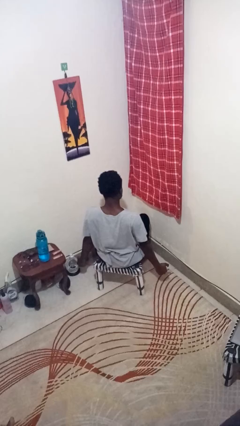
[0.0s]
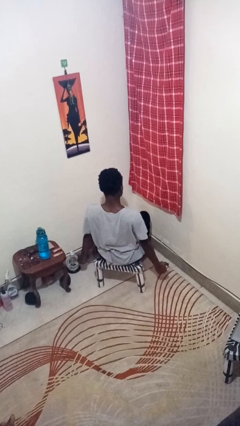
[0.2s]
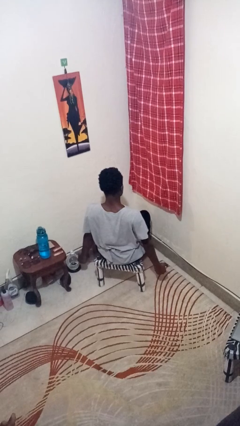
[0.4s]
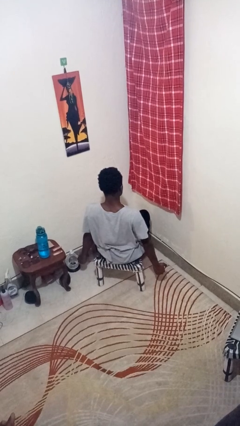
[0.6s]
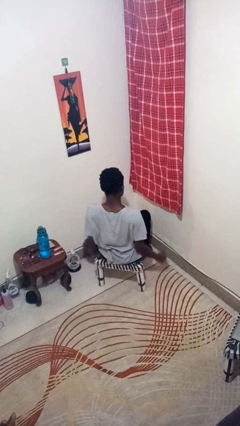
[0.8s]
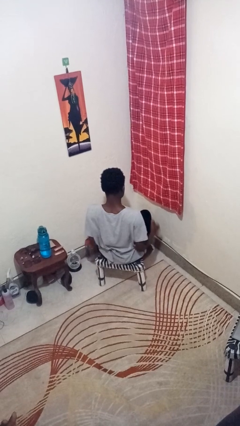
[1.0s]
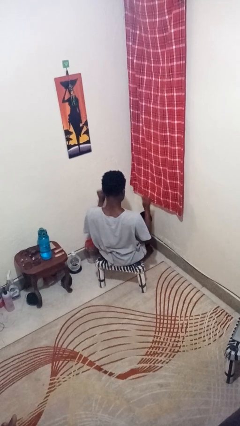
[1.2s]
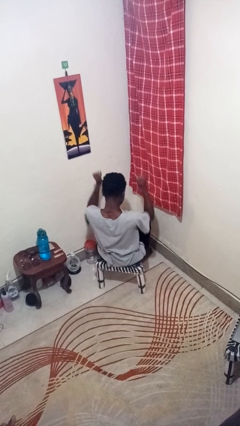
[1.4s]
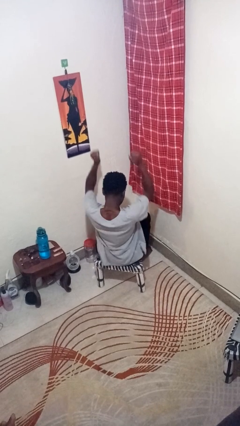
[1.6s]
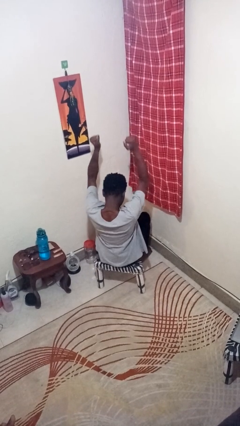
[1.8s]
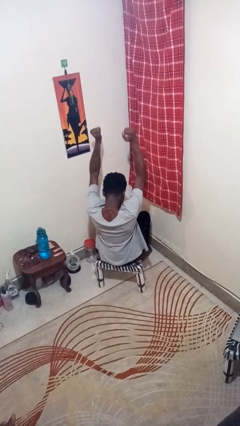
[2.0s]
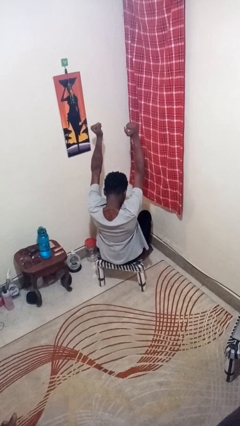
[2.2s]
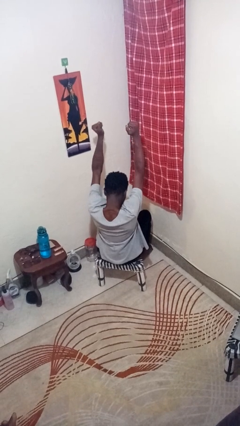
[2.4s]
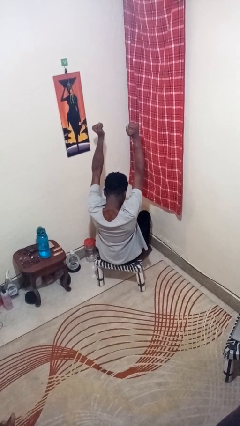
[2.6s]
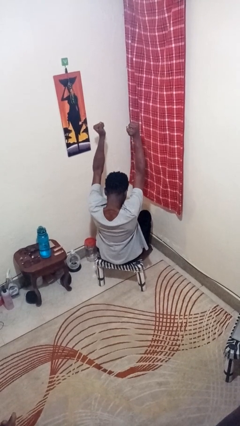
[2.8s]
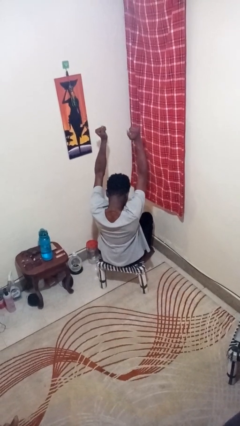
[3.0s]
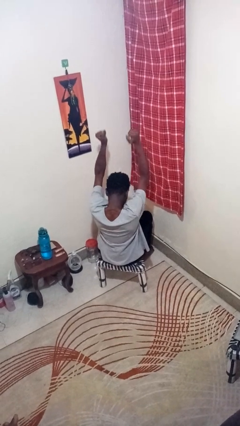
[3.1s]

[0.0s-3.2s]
person stretches arms over head

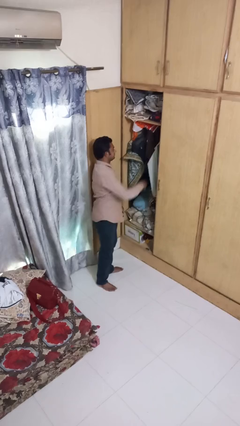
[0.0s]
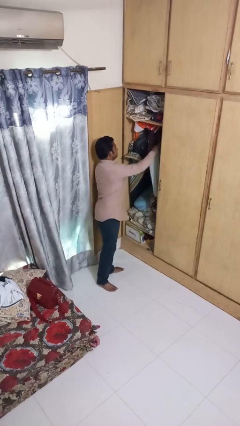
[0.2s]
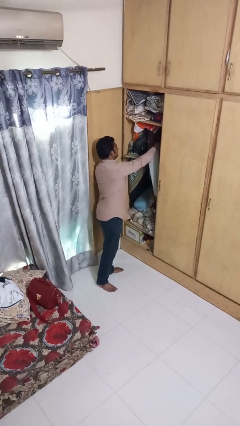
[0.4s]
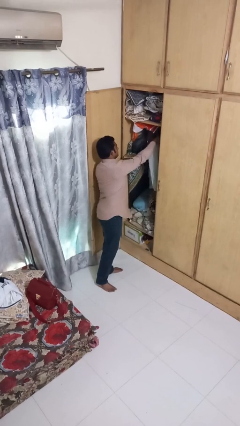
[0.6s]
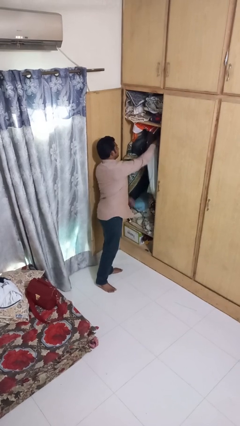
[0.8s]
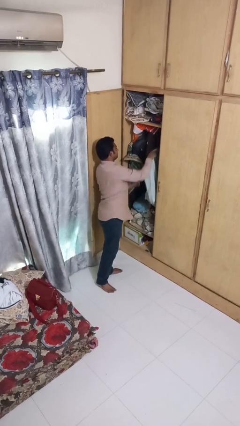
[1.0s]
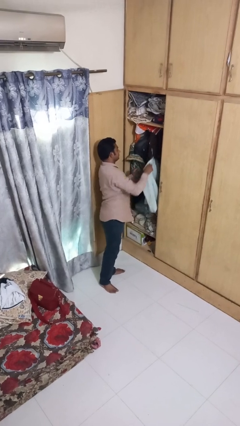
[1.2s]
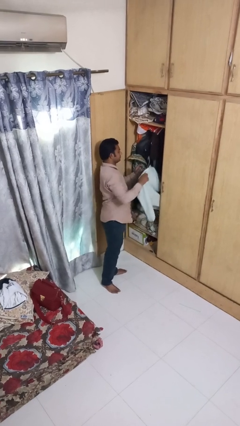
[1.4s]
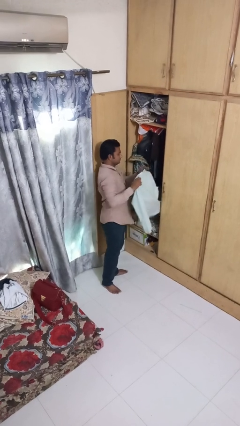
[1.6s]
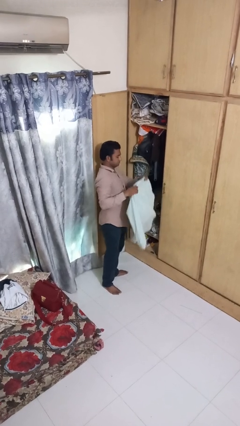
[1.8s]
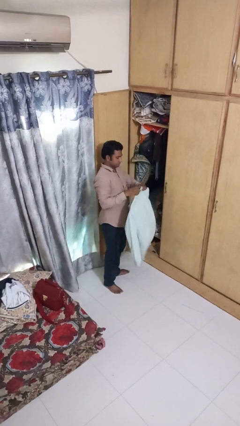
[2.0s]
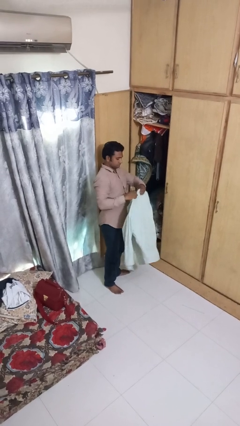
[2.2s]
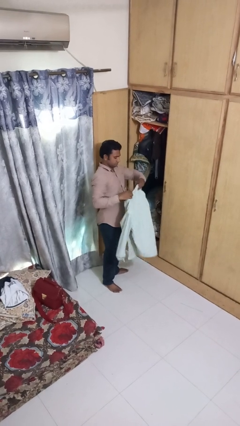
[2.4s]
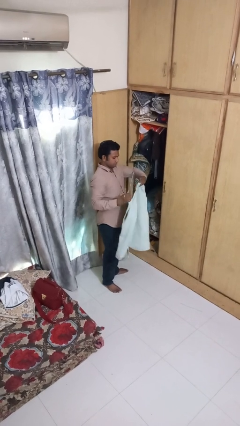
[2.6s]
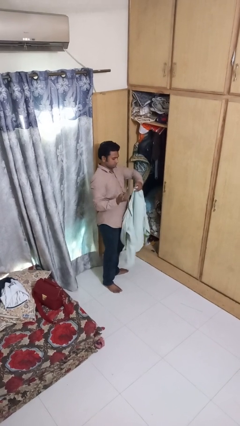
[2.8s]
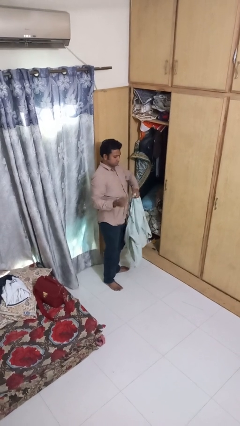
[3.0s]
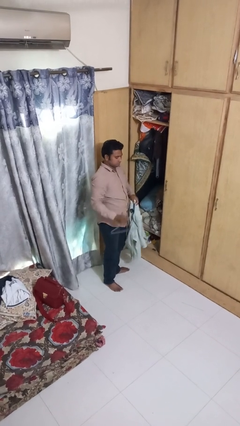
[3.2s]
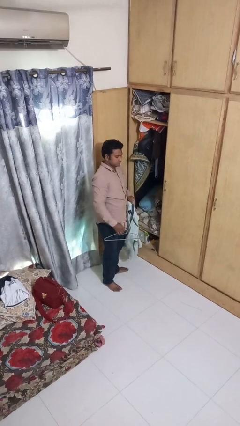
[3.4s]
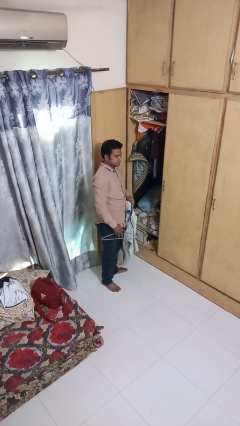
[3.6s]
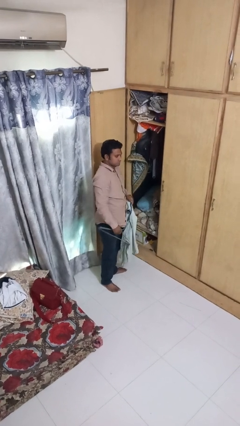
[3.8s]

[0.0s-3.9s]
person takes clothes from closet

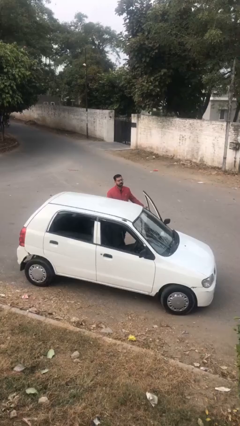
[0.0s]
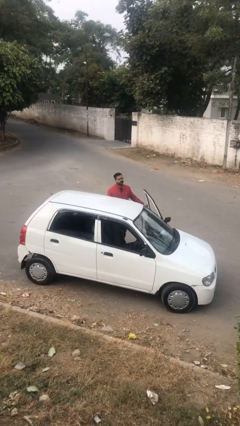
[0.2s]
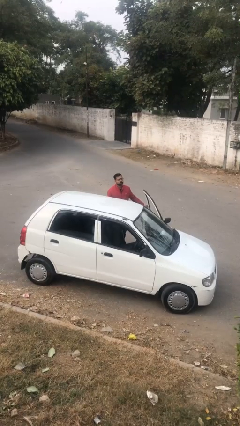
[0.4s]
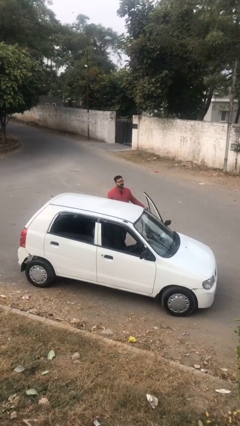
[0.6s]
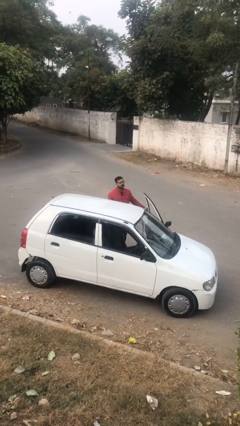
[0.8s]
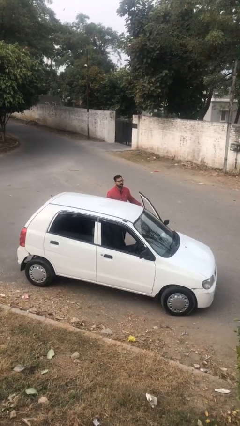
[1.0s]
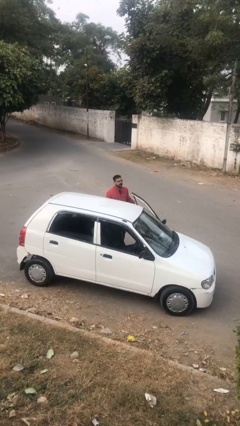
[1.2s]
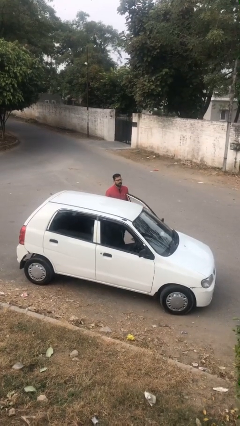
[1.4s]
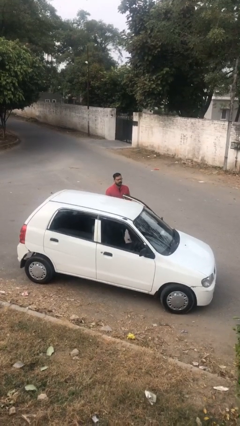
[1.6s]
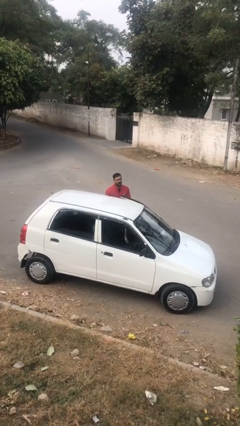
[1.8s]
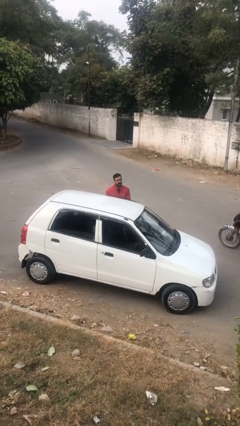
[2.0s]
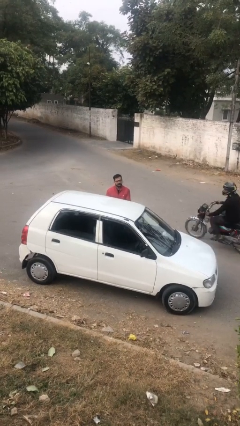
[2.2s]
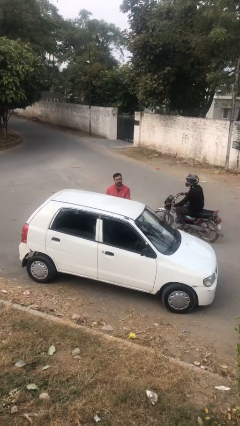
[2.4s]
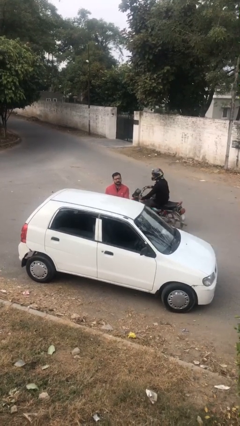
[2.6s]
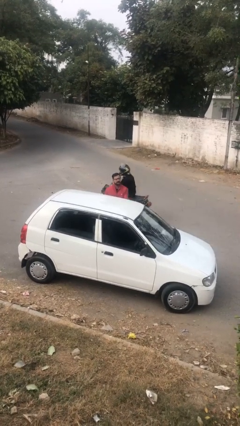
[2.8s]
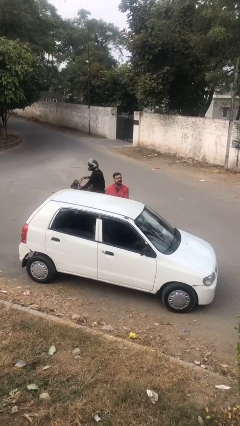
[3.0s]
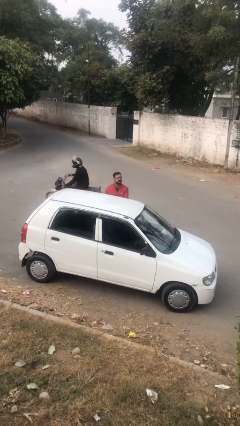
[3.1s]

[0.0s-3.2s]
person closes car door

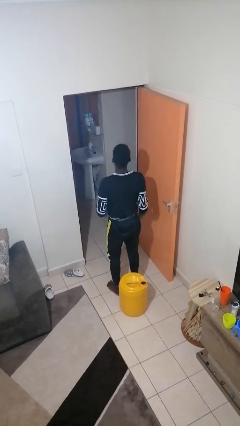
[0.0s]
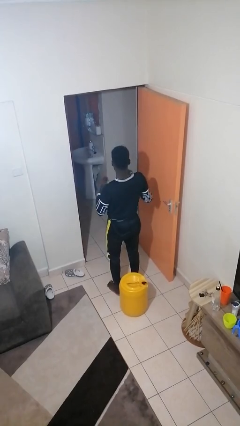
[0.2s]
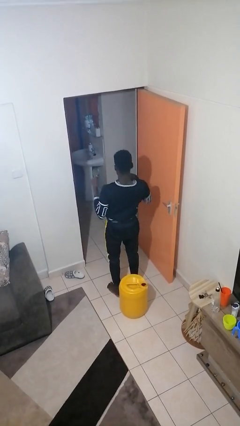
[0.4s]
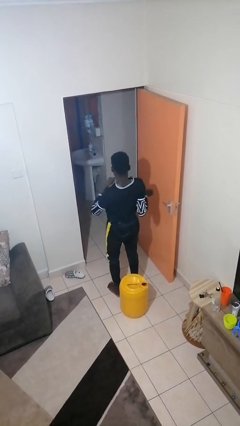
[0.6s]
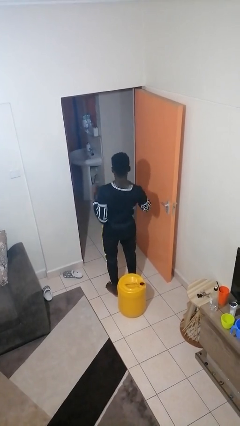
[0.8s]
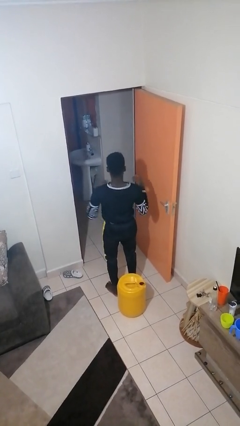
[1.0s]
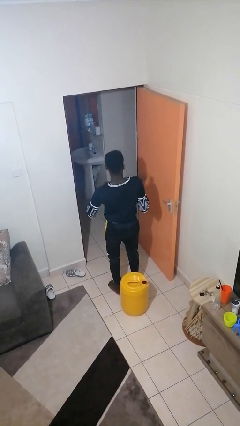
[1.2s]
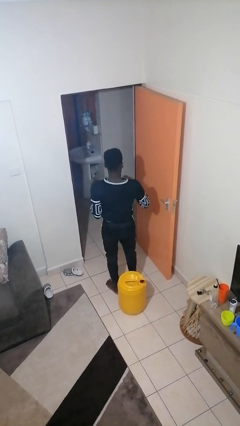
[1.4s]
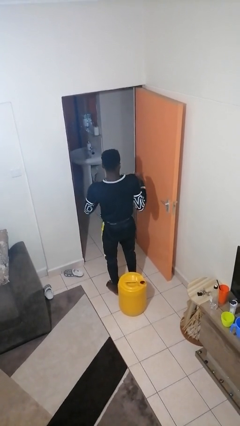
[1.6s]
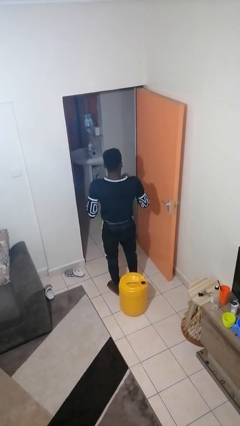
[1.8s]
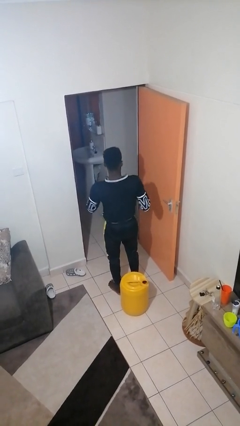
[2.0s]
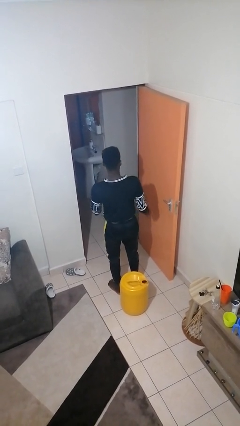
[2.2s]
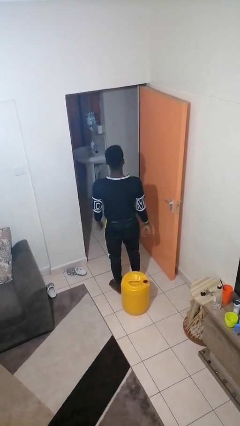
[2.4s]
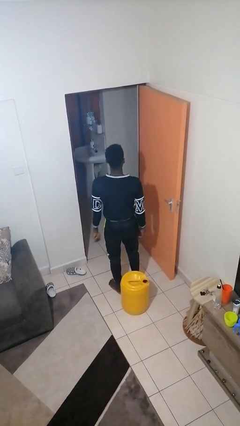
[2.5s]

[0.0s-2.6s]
person drums on chest

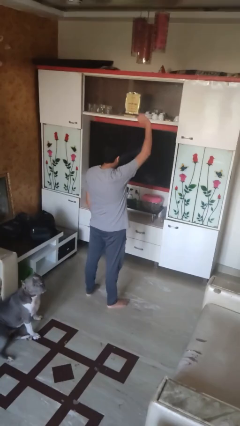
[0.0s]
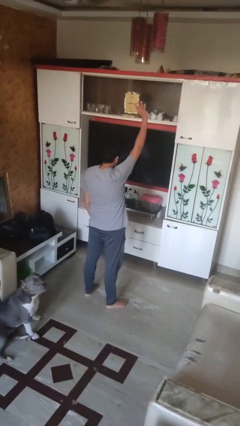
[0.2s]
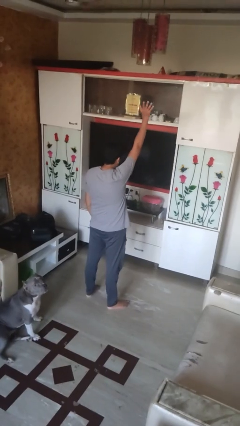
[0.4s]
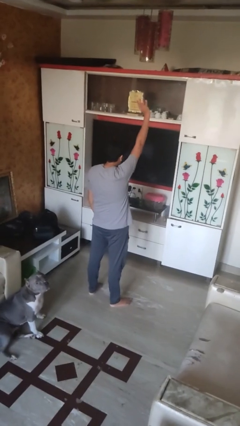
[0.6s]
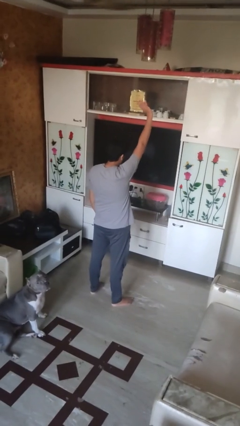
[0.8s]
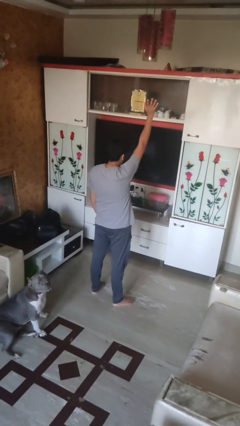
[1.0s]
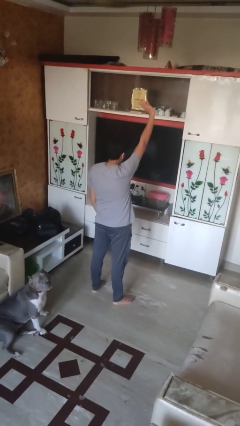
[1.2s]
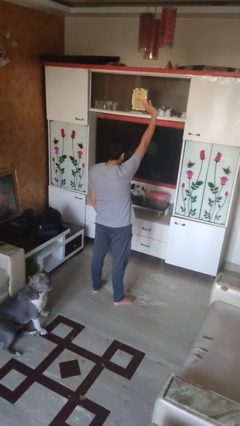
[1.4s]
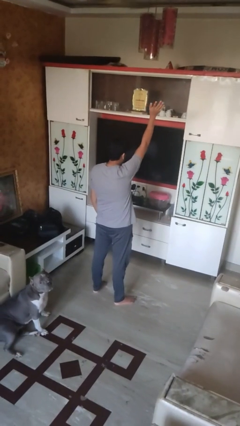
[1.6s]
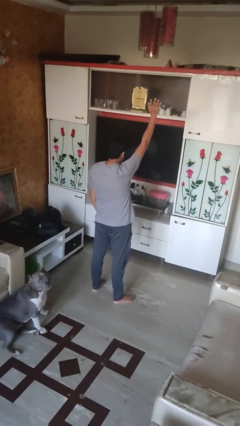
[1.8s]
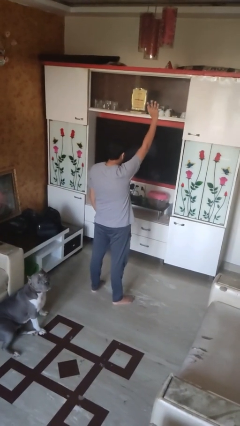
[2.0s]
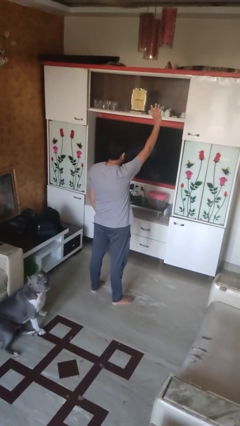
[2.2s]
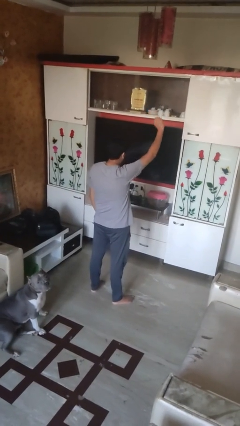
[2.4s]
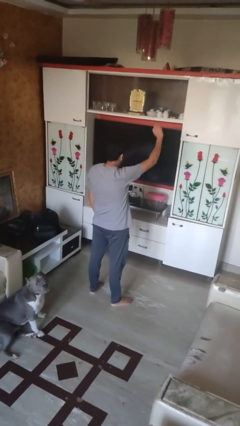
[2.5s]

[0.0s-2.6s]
person waves at person

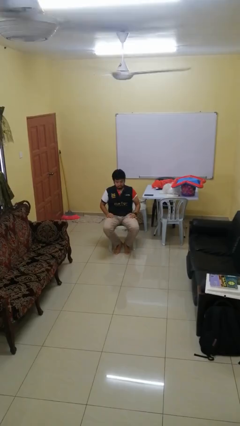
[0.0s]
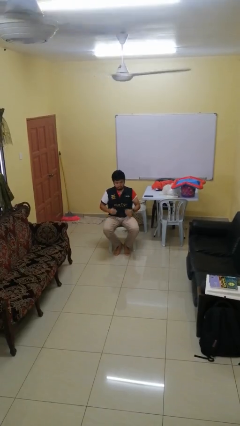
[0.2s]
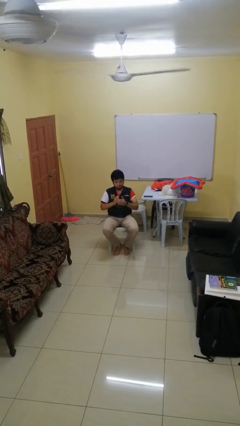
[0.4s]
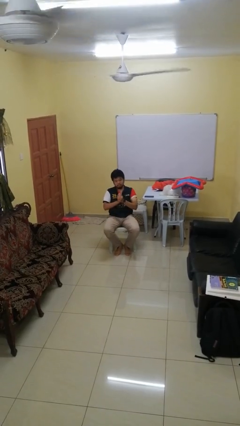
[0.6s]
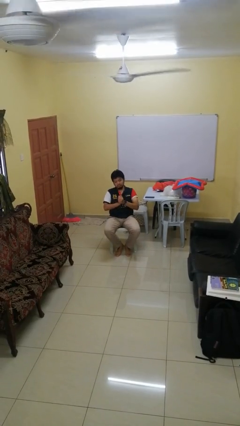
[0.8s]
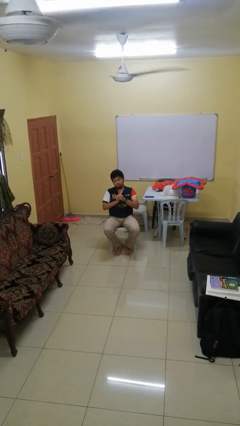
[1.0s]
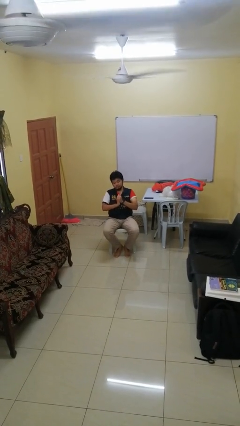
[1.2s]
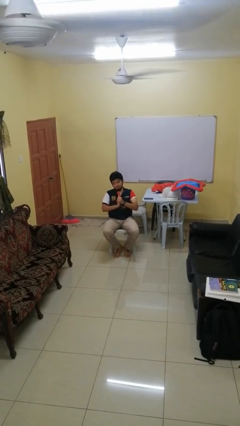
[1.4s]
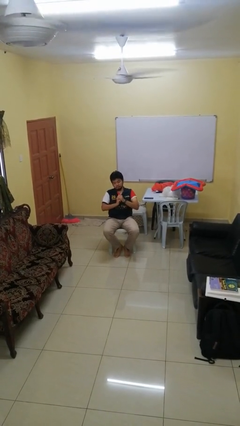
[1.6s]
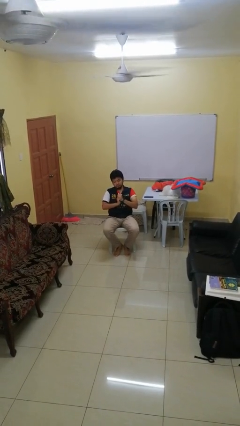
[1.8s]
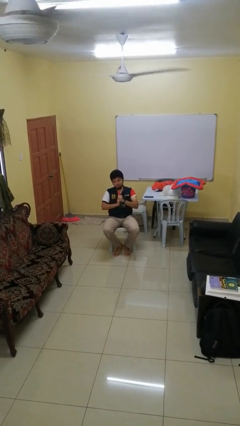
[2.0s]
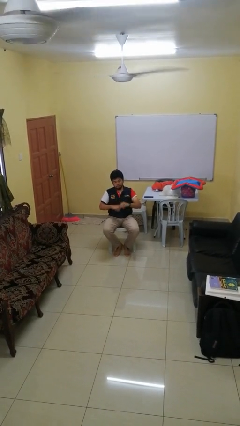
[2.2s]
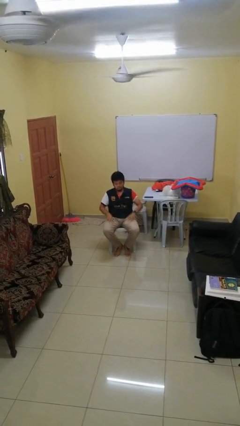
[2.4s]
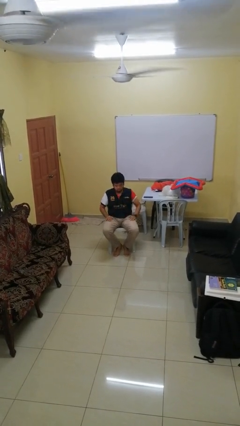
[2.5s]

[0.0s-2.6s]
person cracks knuckles
